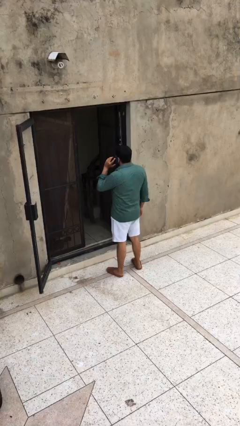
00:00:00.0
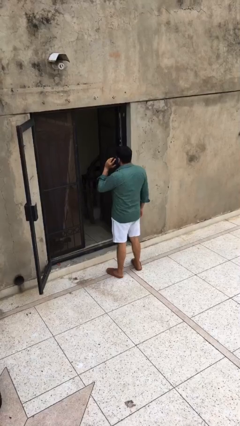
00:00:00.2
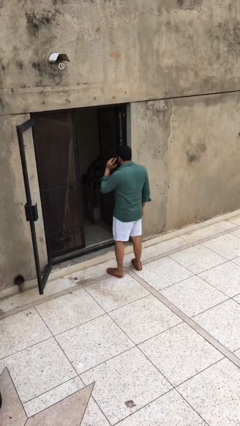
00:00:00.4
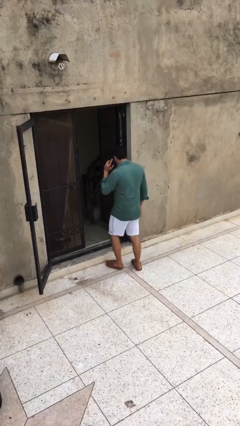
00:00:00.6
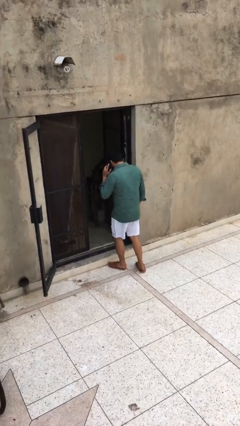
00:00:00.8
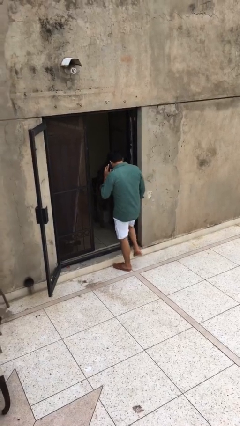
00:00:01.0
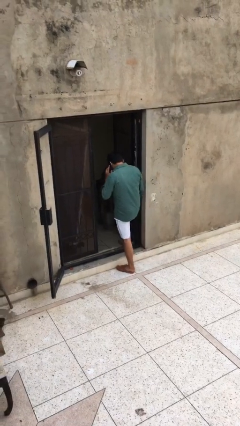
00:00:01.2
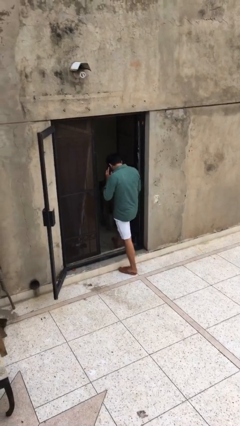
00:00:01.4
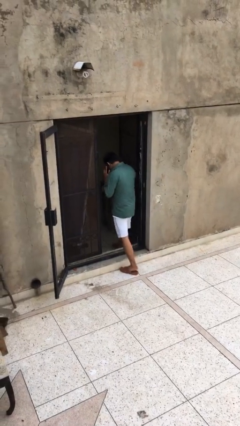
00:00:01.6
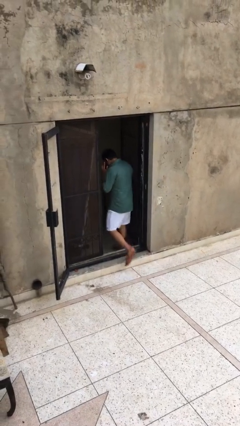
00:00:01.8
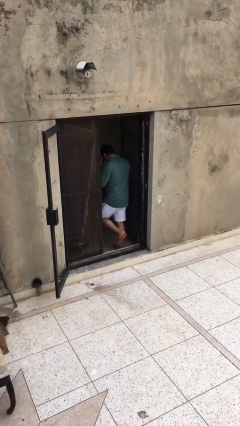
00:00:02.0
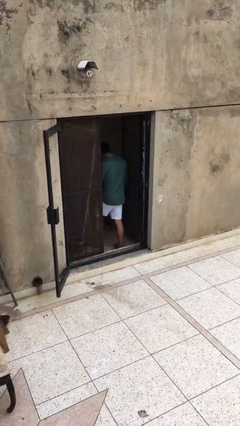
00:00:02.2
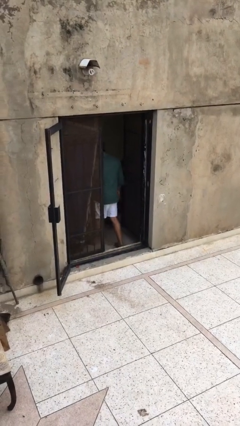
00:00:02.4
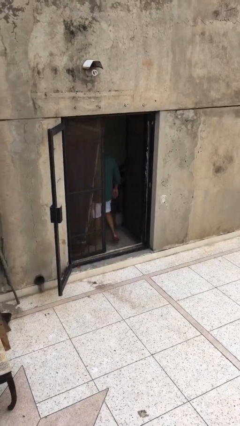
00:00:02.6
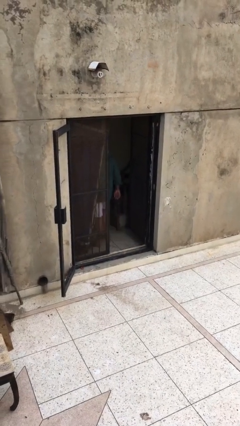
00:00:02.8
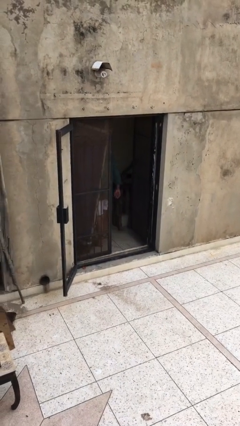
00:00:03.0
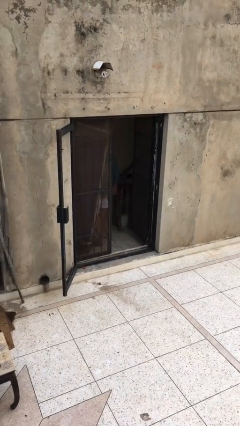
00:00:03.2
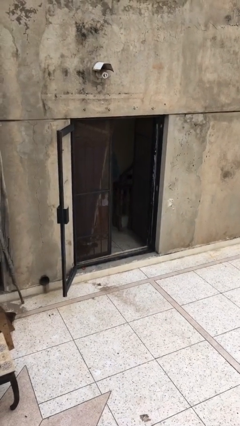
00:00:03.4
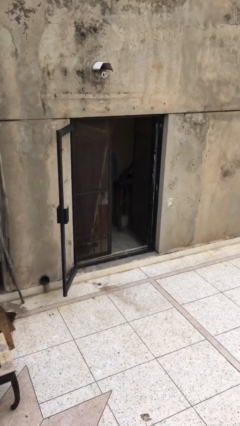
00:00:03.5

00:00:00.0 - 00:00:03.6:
person exits scene through structure

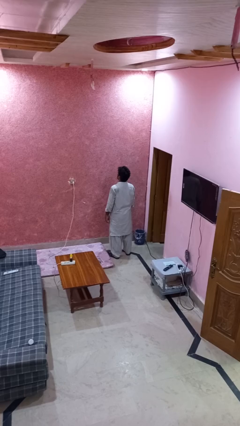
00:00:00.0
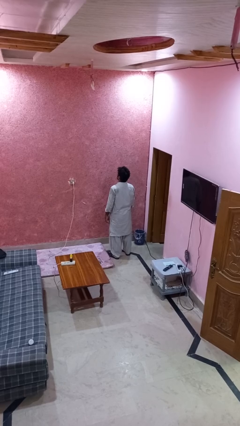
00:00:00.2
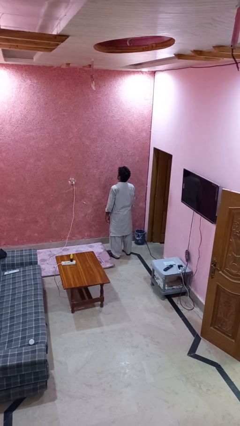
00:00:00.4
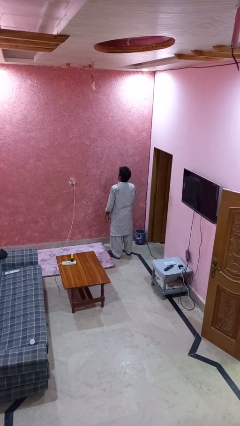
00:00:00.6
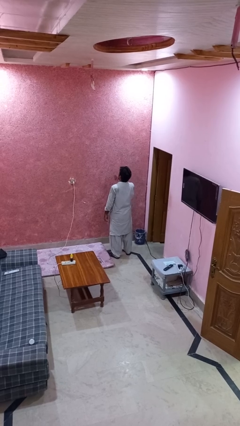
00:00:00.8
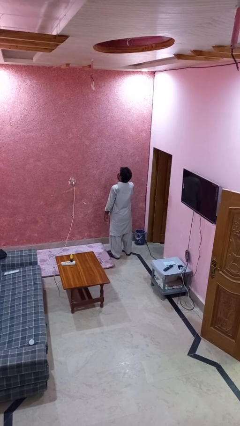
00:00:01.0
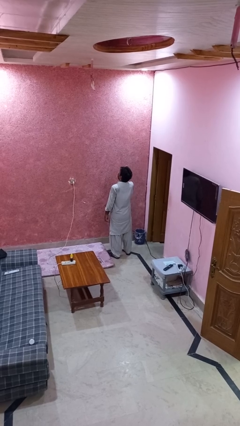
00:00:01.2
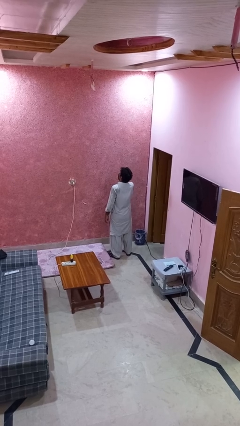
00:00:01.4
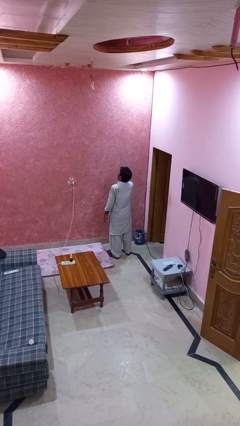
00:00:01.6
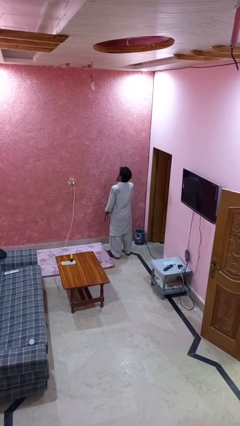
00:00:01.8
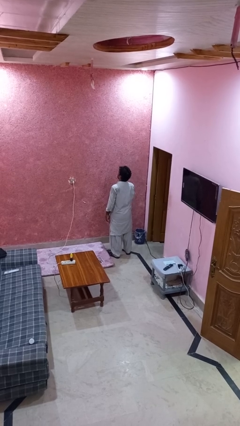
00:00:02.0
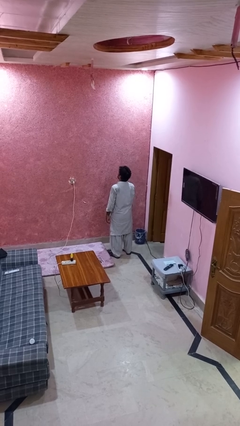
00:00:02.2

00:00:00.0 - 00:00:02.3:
person yawns

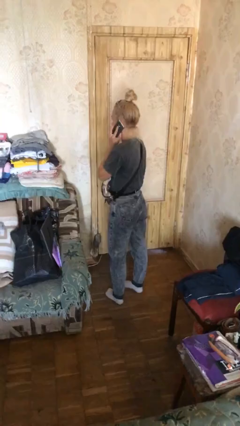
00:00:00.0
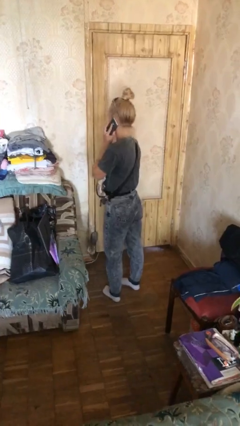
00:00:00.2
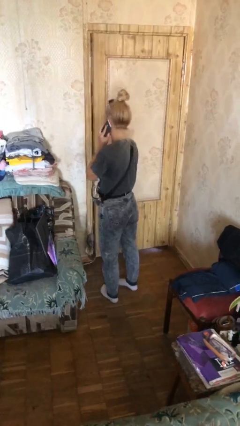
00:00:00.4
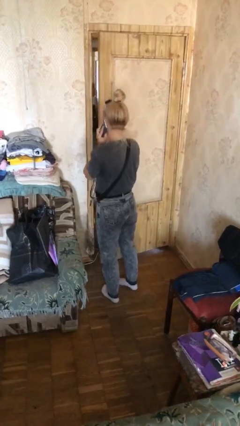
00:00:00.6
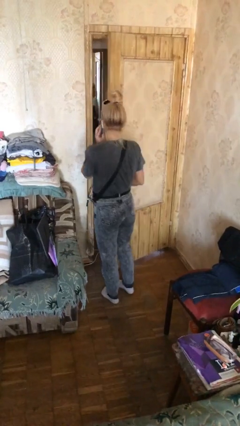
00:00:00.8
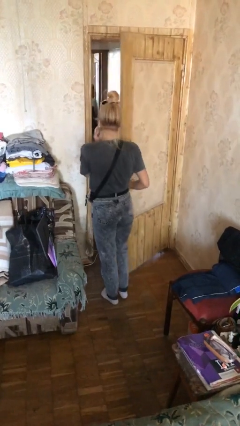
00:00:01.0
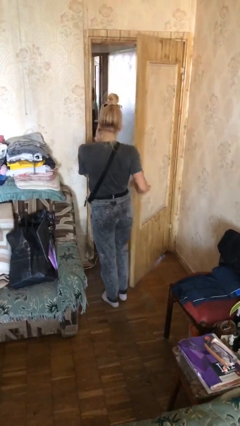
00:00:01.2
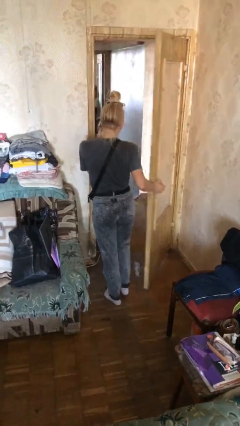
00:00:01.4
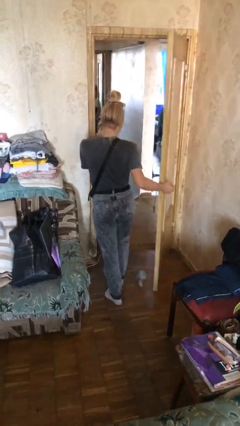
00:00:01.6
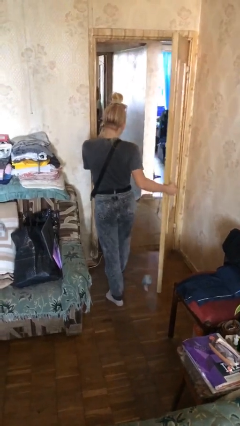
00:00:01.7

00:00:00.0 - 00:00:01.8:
person opens facility door

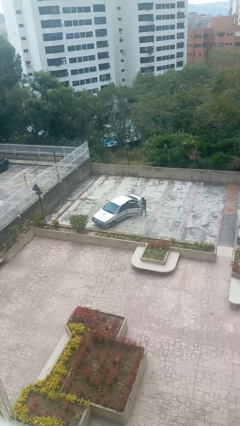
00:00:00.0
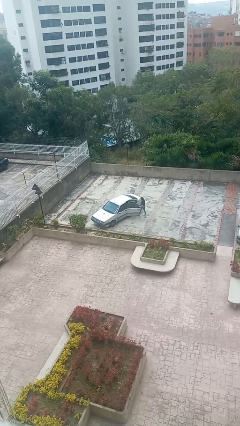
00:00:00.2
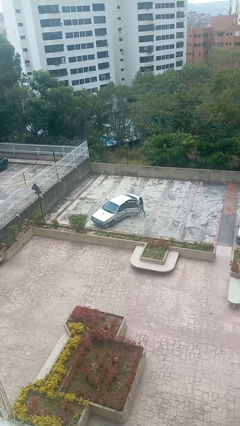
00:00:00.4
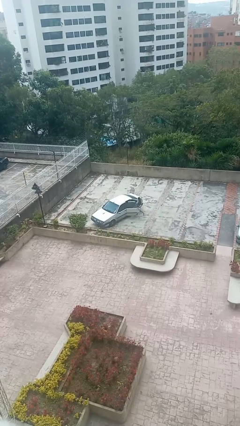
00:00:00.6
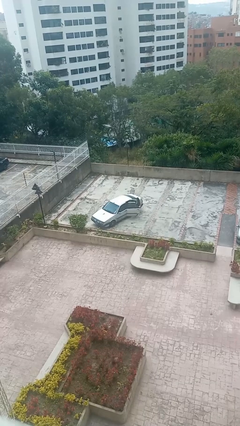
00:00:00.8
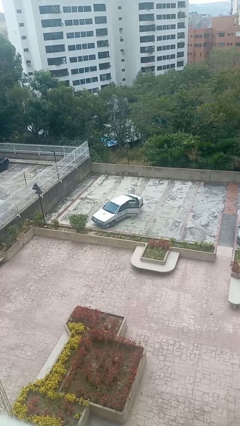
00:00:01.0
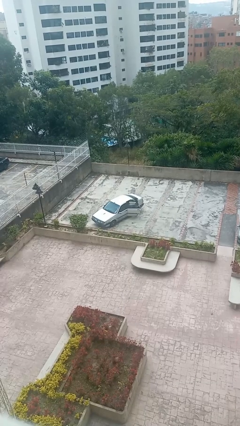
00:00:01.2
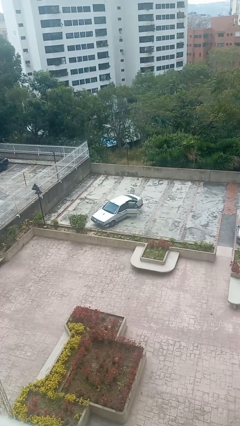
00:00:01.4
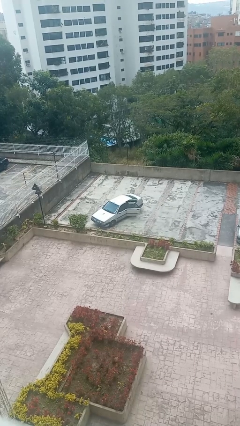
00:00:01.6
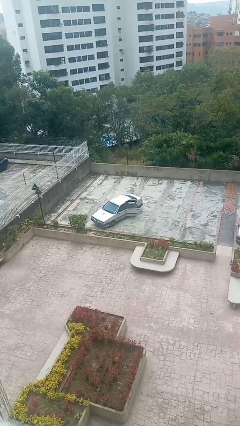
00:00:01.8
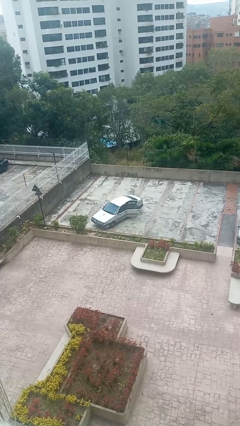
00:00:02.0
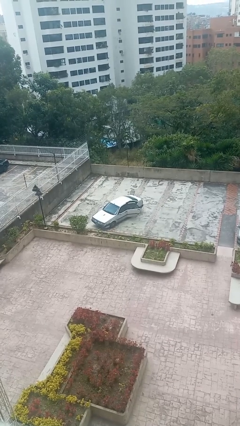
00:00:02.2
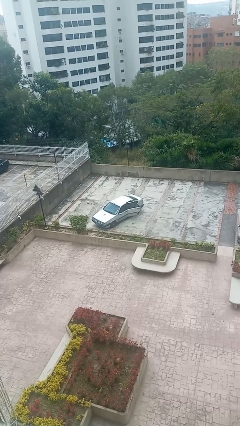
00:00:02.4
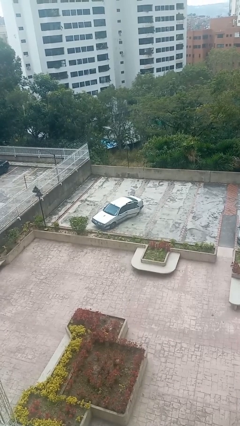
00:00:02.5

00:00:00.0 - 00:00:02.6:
car picks up person

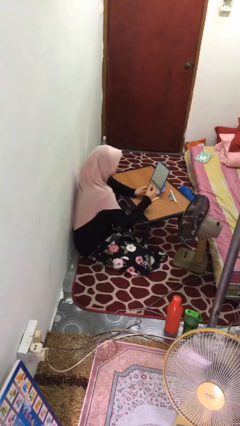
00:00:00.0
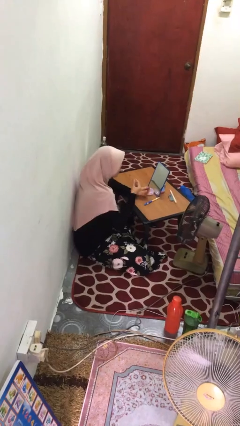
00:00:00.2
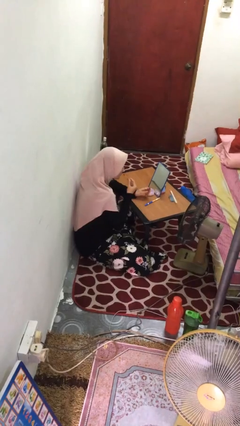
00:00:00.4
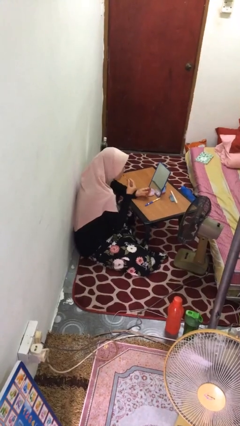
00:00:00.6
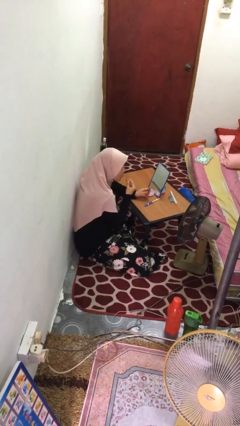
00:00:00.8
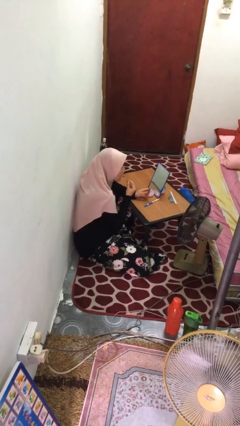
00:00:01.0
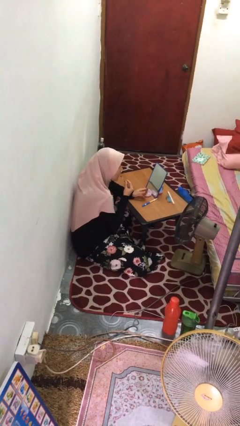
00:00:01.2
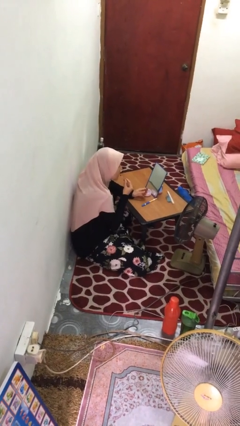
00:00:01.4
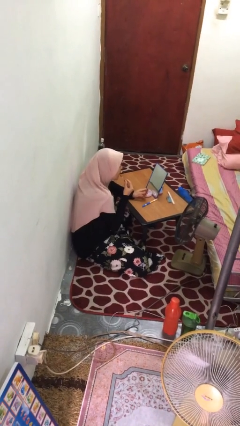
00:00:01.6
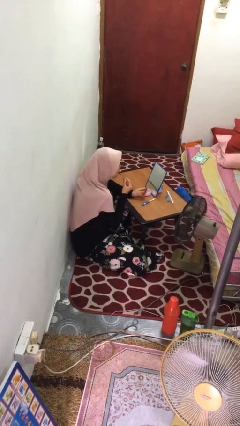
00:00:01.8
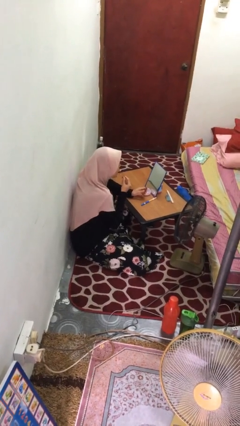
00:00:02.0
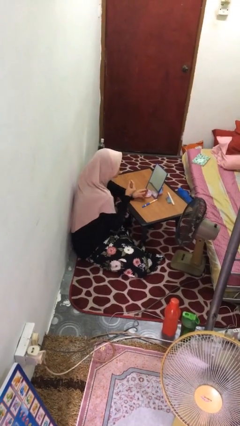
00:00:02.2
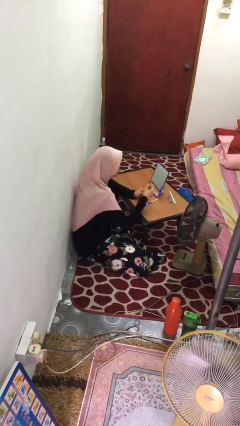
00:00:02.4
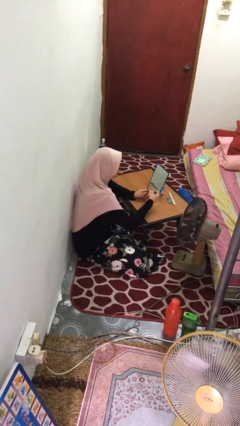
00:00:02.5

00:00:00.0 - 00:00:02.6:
person applies lip makeup

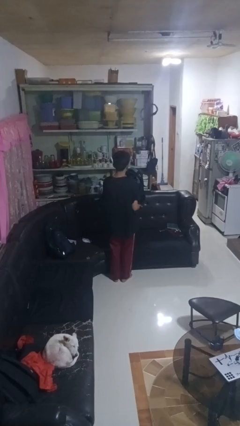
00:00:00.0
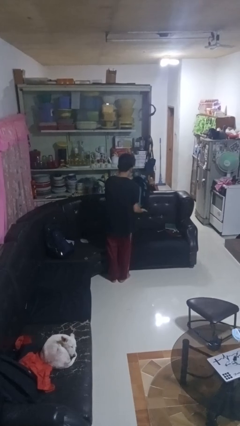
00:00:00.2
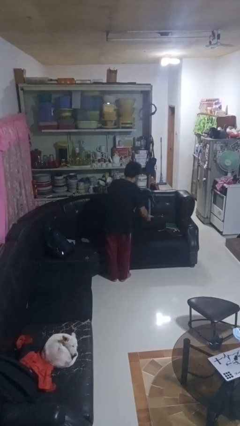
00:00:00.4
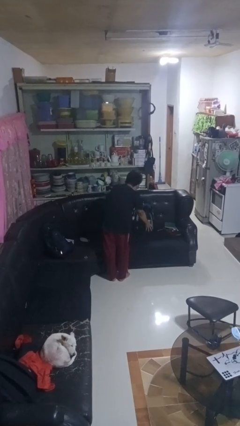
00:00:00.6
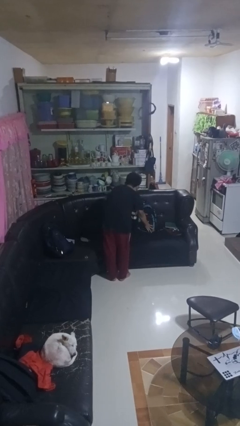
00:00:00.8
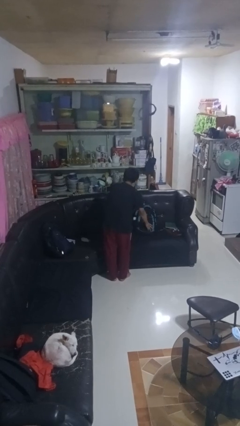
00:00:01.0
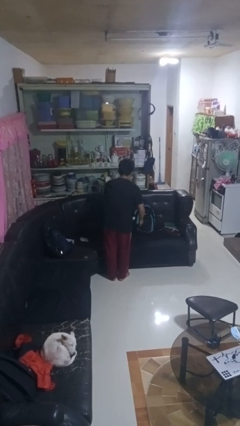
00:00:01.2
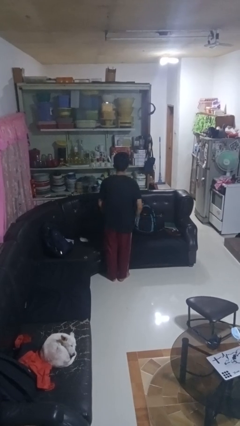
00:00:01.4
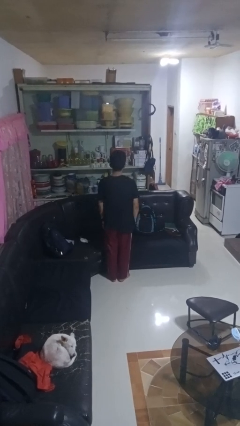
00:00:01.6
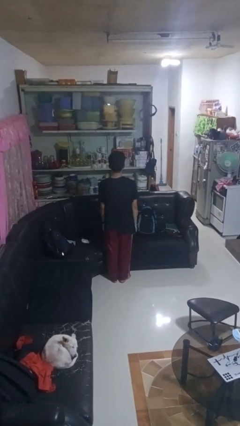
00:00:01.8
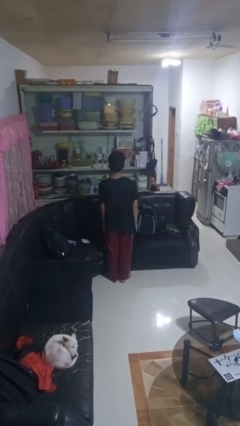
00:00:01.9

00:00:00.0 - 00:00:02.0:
person puts down object on couch

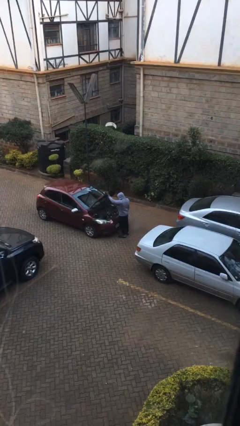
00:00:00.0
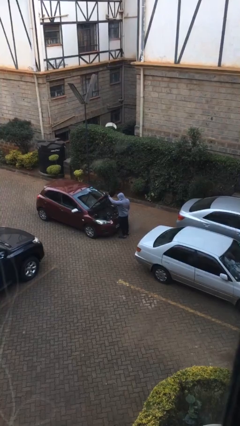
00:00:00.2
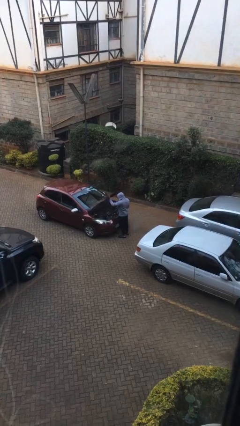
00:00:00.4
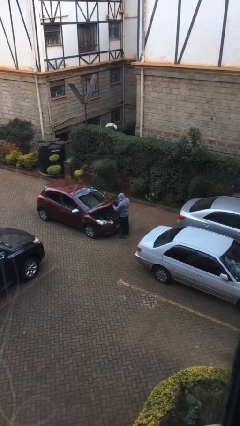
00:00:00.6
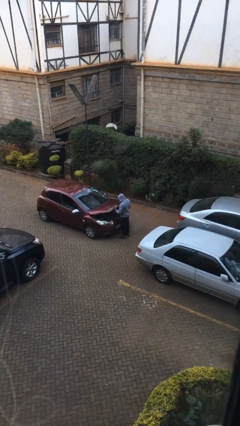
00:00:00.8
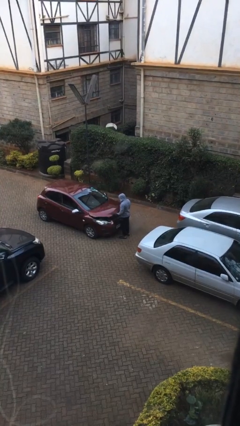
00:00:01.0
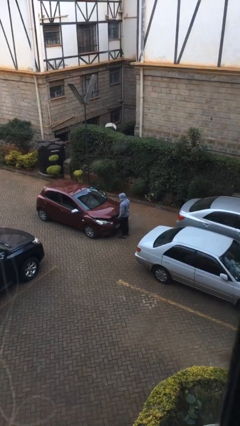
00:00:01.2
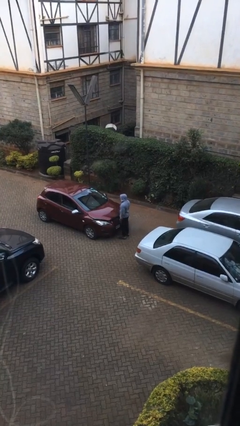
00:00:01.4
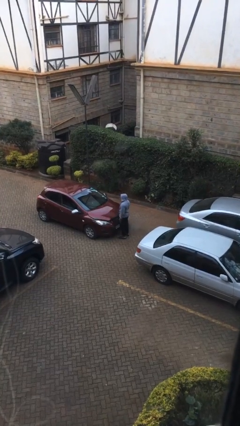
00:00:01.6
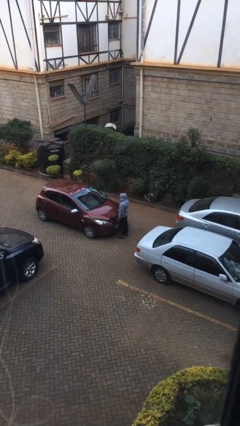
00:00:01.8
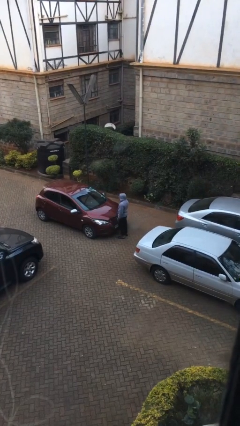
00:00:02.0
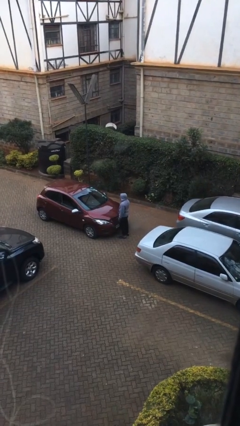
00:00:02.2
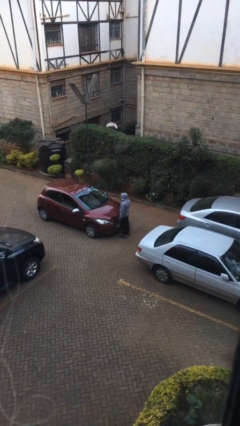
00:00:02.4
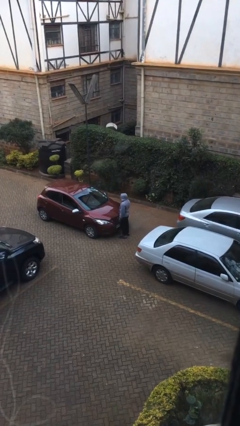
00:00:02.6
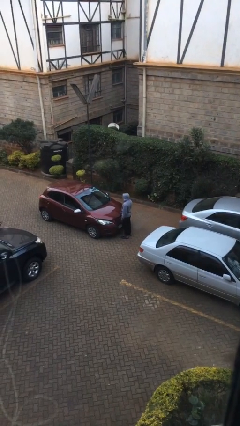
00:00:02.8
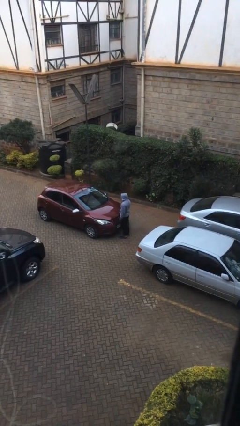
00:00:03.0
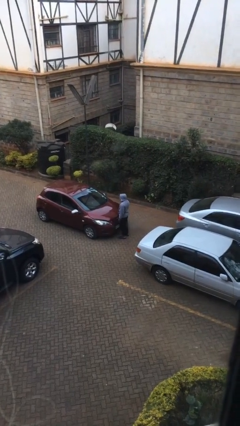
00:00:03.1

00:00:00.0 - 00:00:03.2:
person closes car hood
